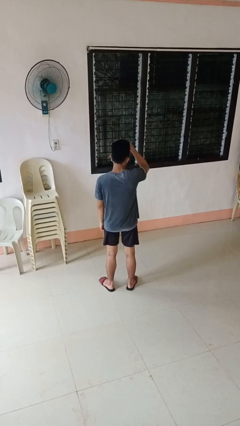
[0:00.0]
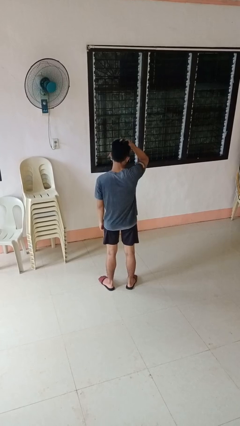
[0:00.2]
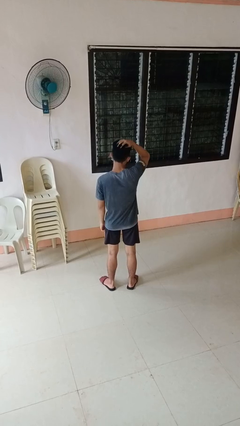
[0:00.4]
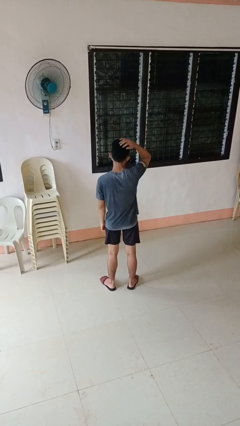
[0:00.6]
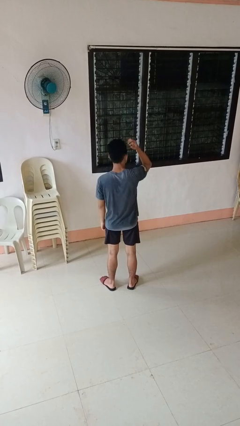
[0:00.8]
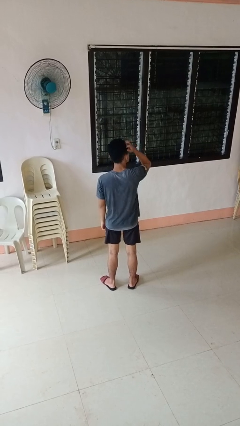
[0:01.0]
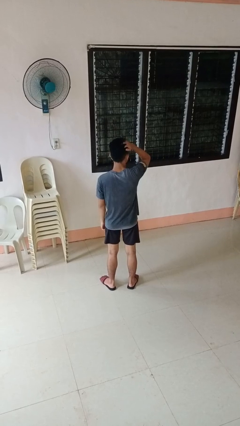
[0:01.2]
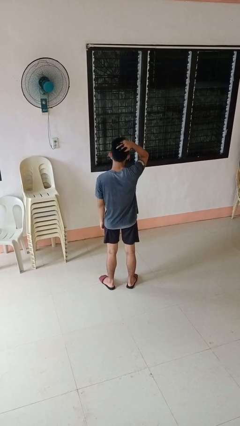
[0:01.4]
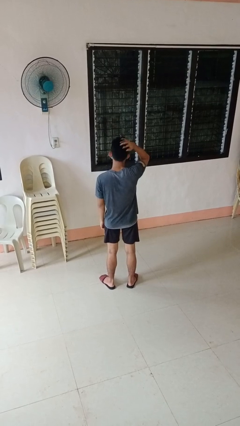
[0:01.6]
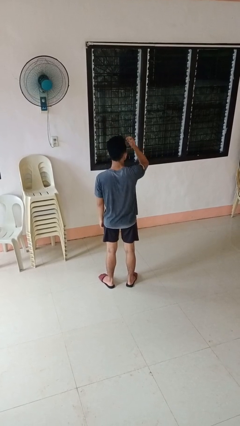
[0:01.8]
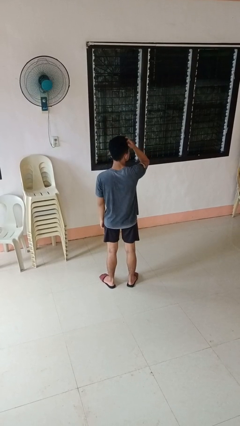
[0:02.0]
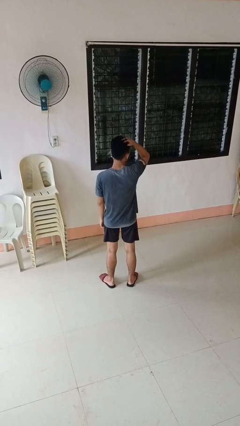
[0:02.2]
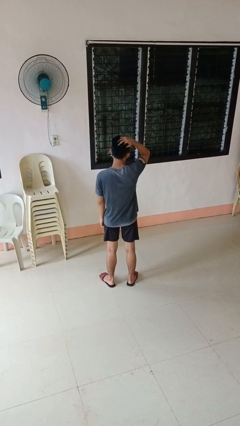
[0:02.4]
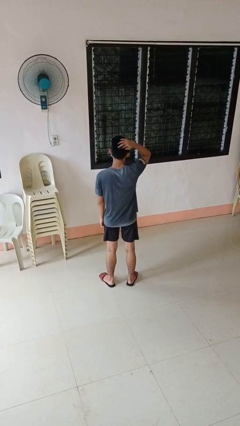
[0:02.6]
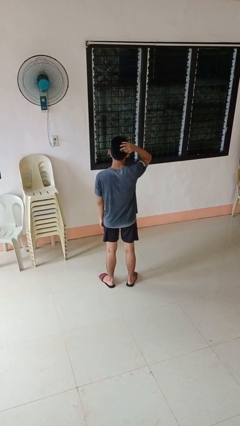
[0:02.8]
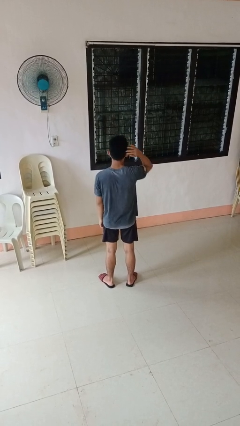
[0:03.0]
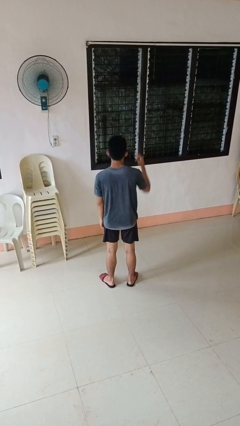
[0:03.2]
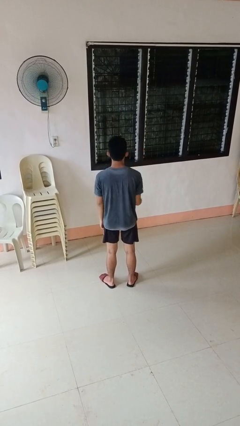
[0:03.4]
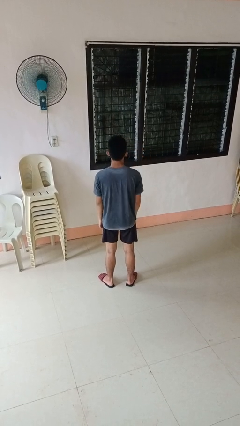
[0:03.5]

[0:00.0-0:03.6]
person strokes hair

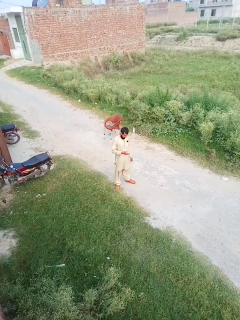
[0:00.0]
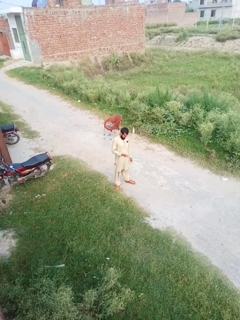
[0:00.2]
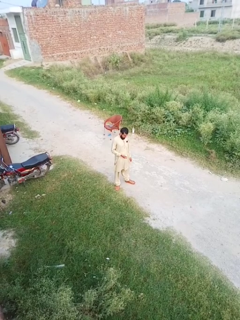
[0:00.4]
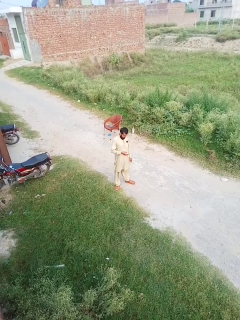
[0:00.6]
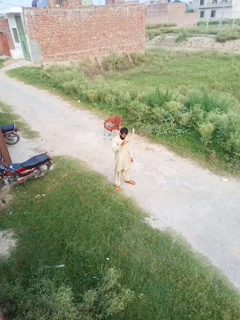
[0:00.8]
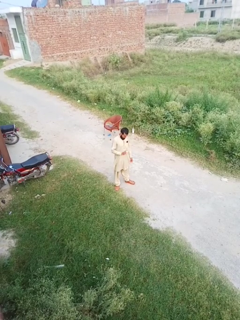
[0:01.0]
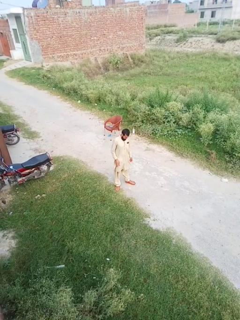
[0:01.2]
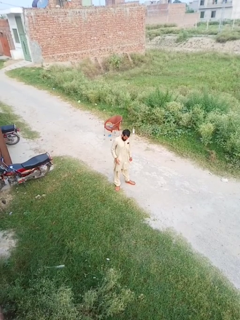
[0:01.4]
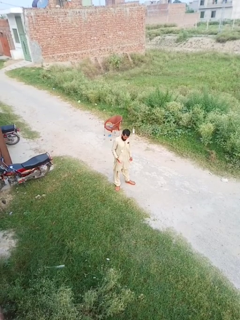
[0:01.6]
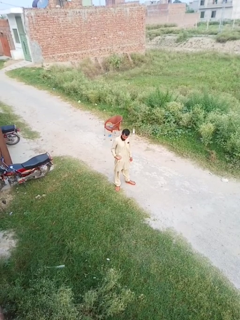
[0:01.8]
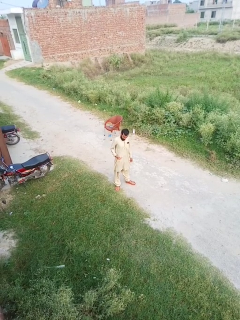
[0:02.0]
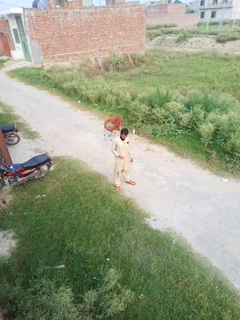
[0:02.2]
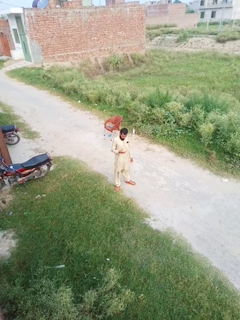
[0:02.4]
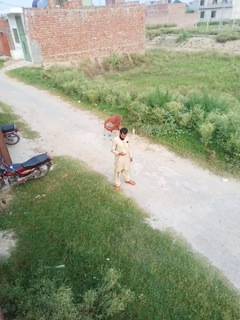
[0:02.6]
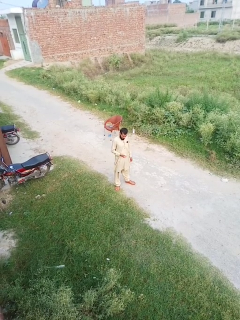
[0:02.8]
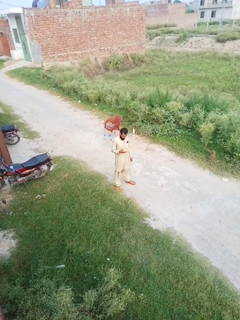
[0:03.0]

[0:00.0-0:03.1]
person bounces ball on floor

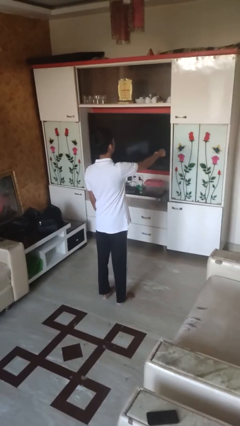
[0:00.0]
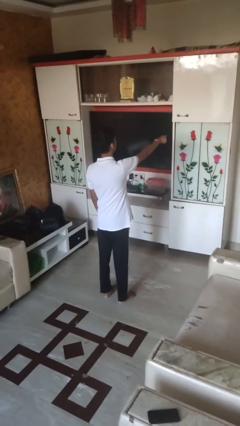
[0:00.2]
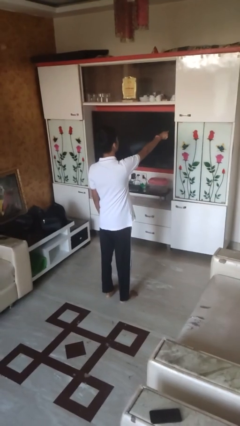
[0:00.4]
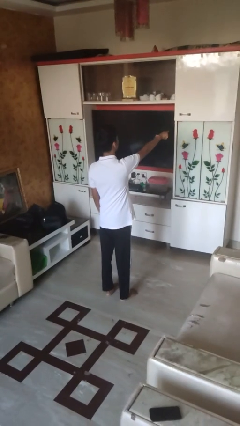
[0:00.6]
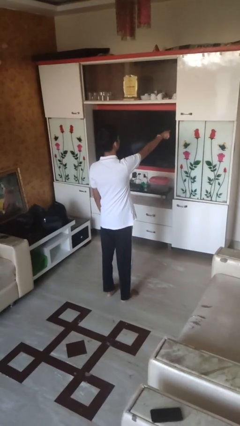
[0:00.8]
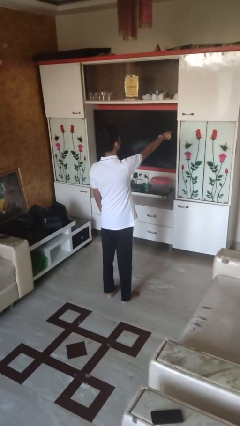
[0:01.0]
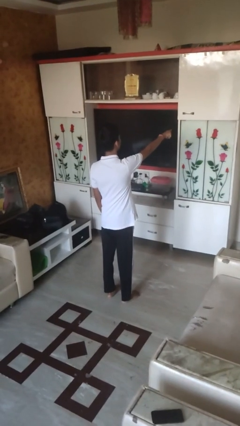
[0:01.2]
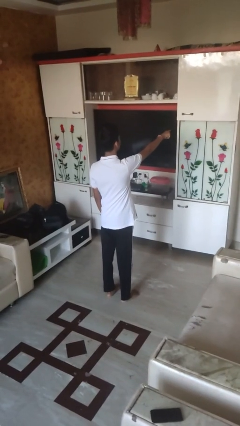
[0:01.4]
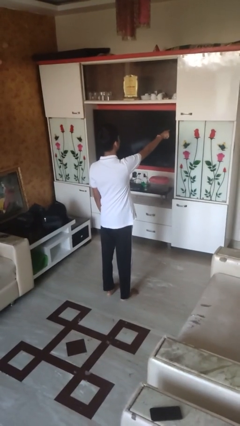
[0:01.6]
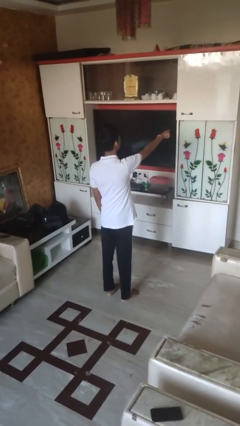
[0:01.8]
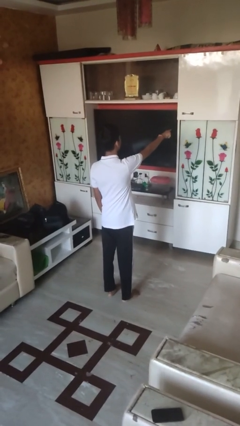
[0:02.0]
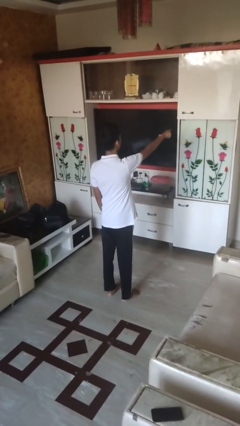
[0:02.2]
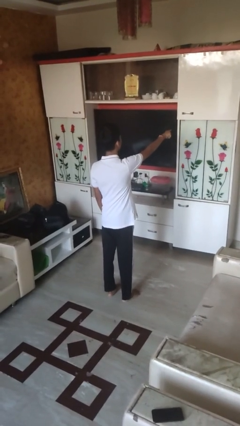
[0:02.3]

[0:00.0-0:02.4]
person points at person

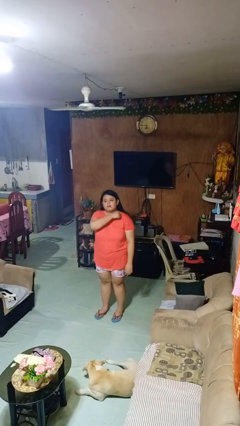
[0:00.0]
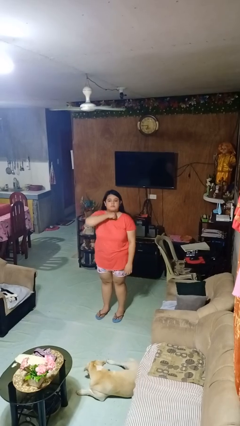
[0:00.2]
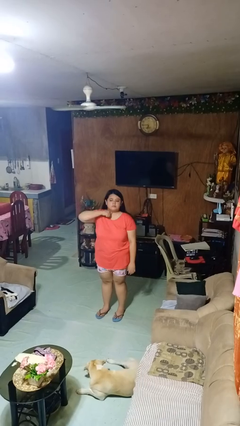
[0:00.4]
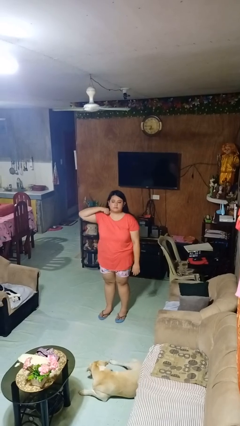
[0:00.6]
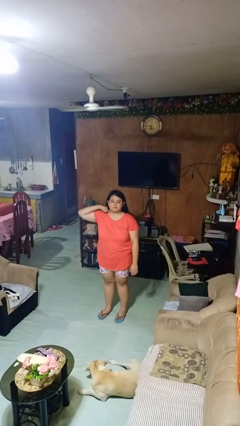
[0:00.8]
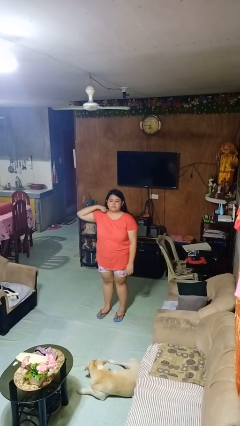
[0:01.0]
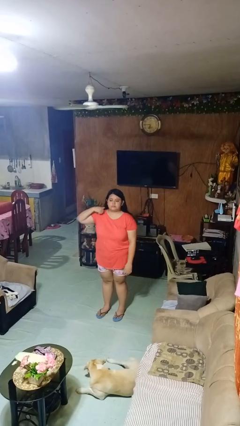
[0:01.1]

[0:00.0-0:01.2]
person gestures cut

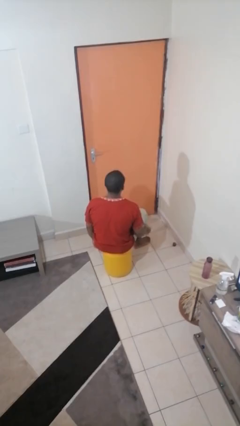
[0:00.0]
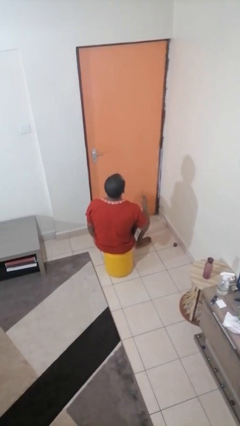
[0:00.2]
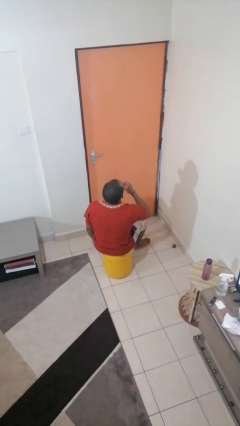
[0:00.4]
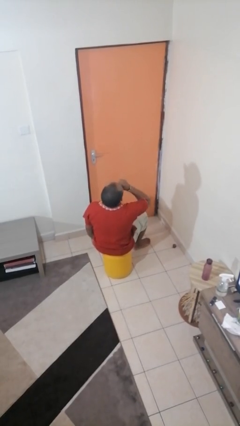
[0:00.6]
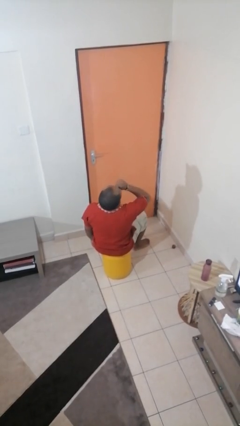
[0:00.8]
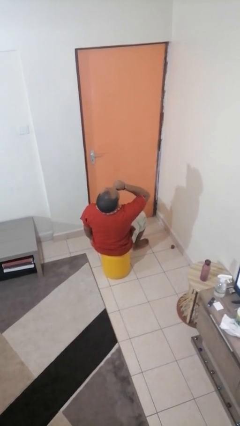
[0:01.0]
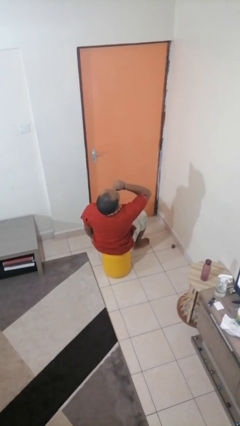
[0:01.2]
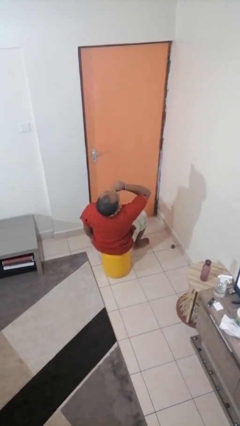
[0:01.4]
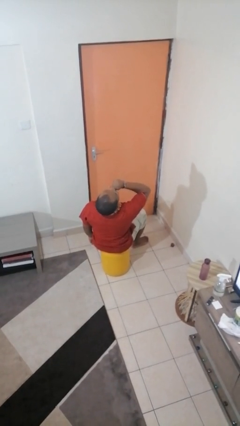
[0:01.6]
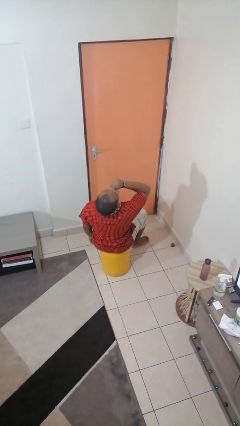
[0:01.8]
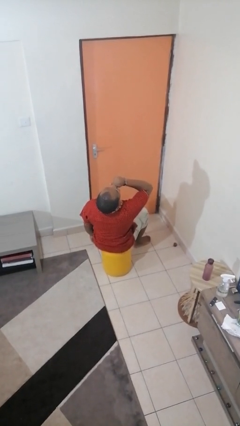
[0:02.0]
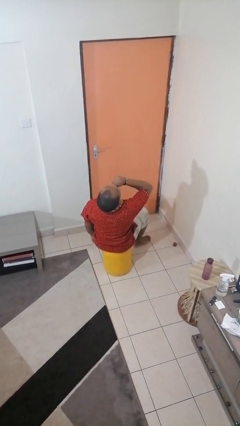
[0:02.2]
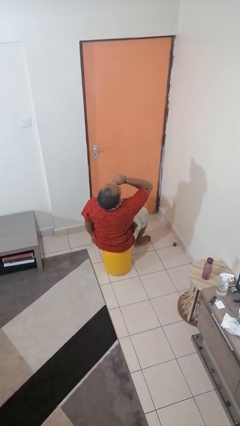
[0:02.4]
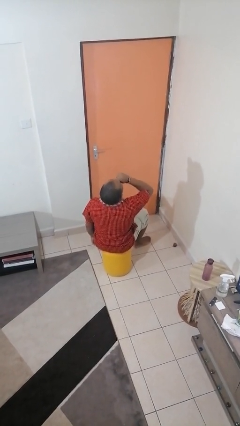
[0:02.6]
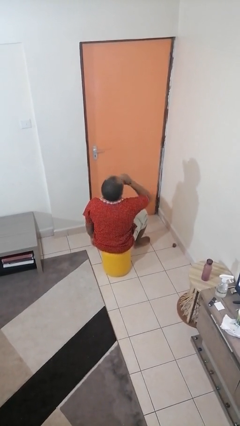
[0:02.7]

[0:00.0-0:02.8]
person yawns

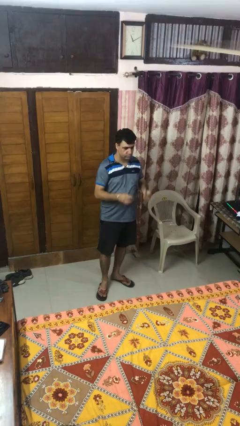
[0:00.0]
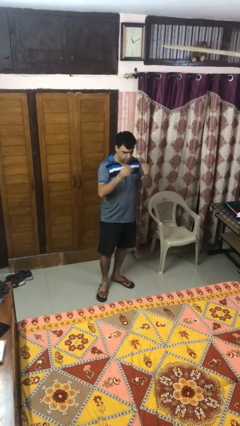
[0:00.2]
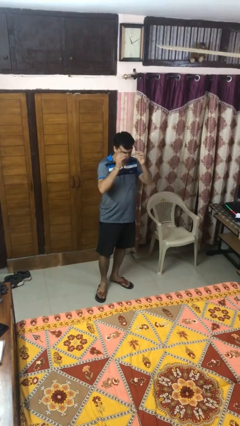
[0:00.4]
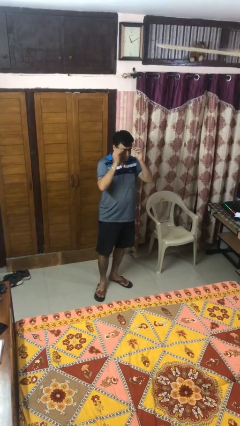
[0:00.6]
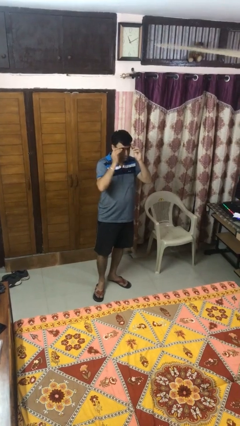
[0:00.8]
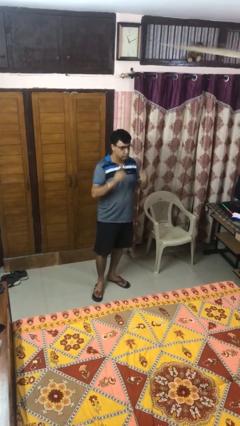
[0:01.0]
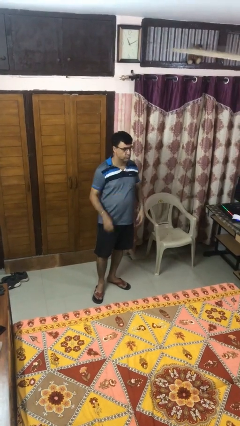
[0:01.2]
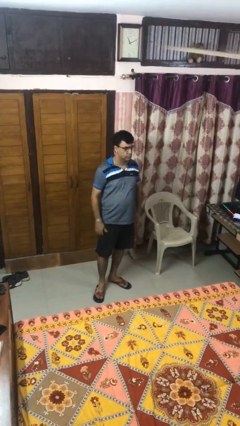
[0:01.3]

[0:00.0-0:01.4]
person puts on glasses

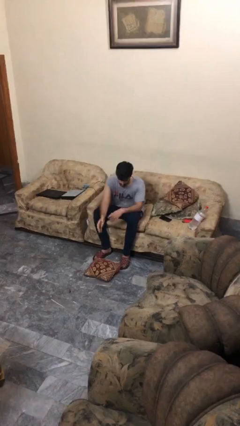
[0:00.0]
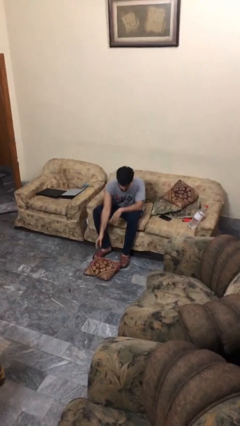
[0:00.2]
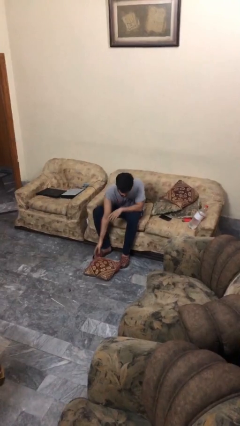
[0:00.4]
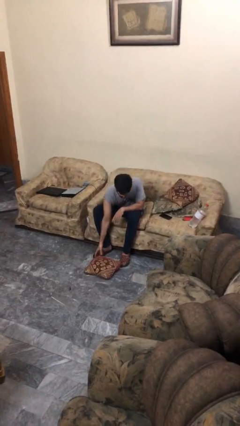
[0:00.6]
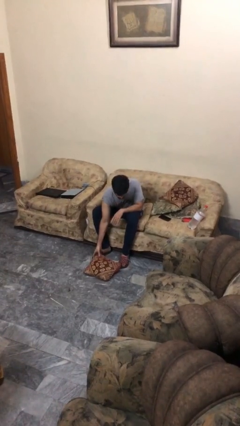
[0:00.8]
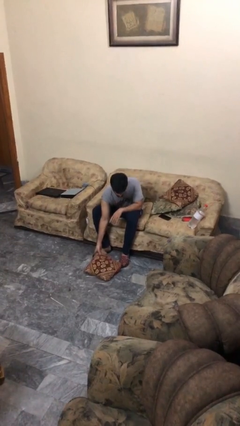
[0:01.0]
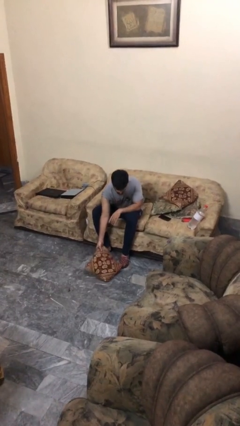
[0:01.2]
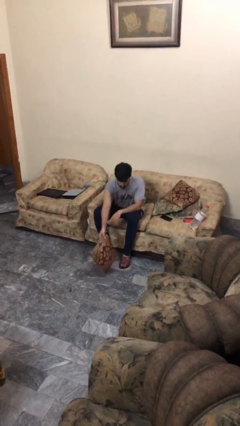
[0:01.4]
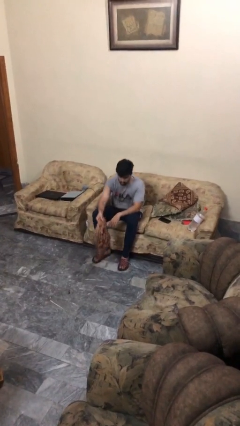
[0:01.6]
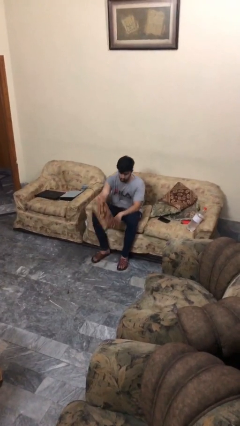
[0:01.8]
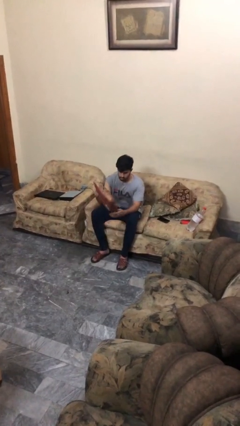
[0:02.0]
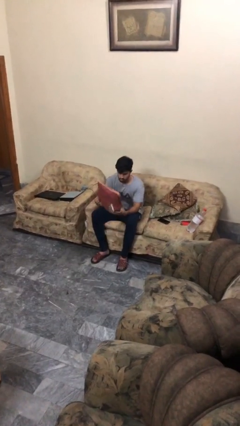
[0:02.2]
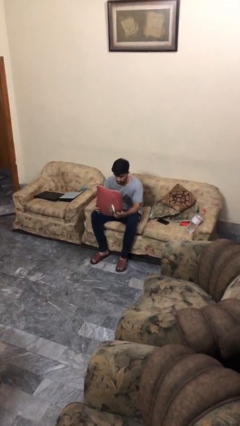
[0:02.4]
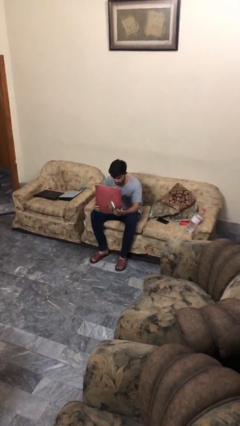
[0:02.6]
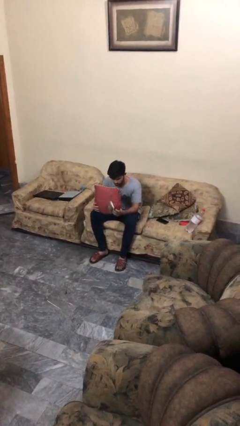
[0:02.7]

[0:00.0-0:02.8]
person picks up object from floor

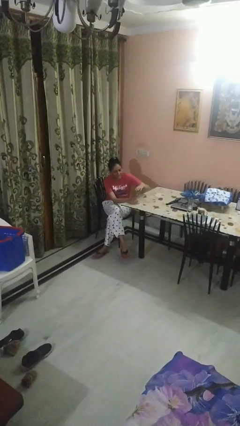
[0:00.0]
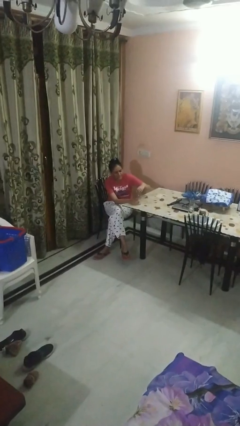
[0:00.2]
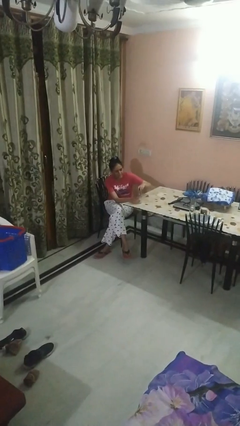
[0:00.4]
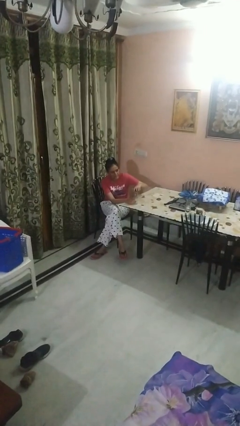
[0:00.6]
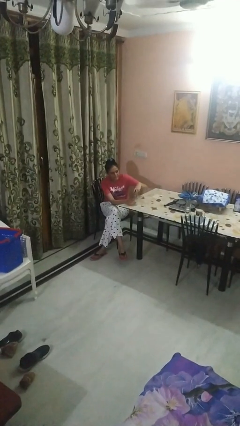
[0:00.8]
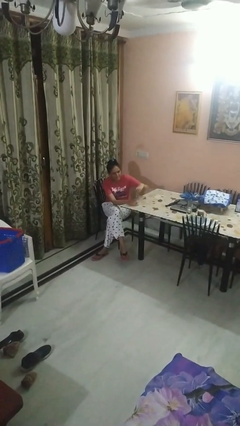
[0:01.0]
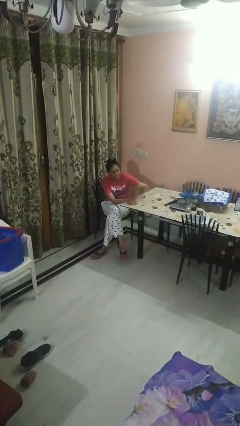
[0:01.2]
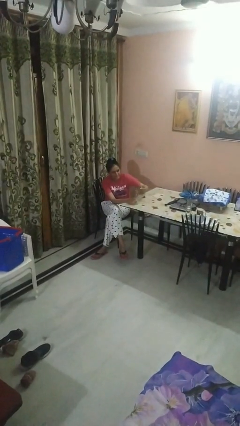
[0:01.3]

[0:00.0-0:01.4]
person unscrews lid from bottle
